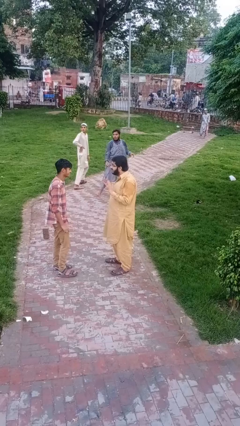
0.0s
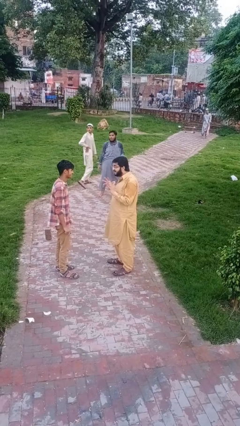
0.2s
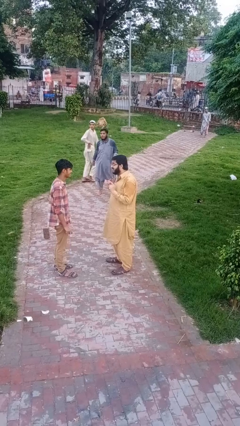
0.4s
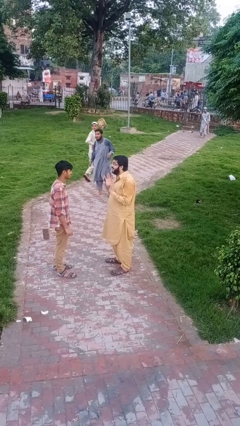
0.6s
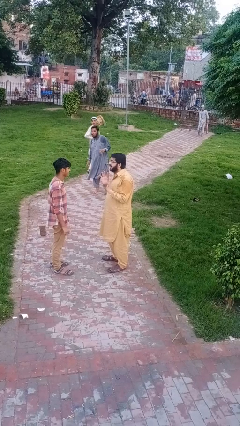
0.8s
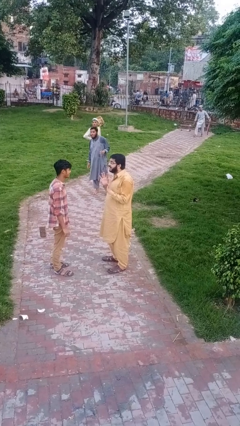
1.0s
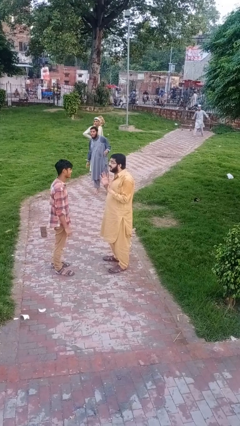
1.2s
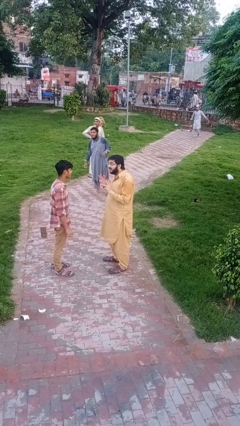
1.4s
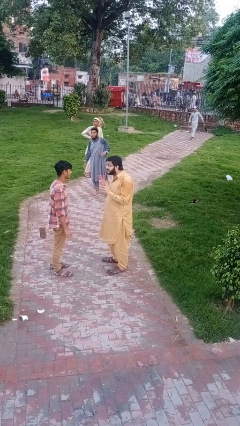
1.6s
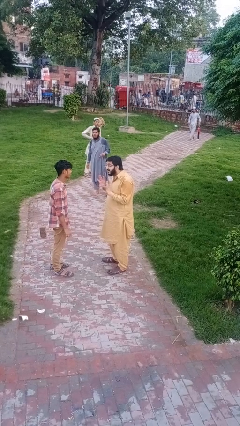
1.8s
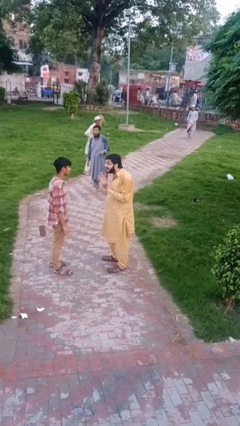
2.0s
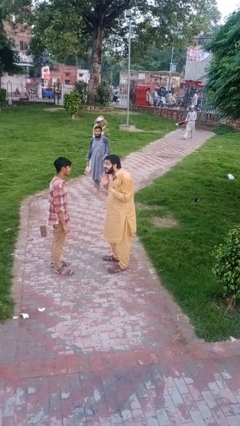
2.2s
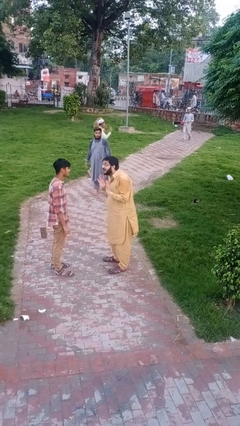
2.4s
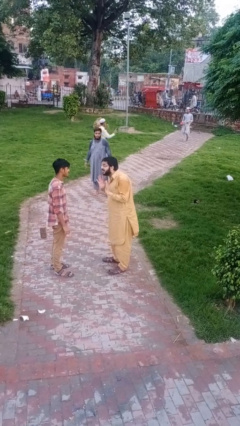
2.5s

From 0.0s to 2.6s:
person talks to person

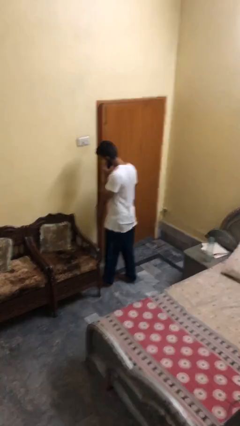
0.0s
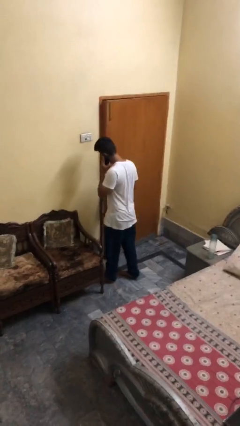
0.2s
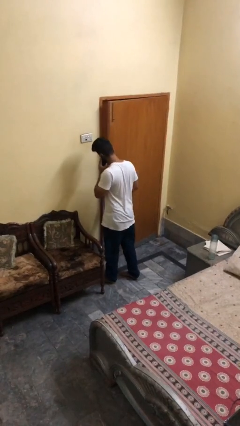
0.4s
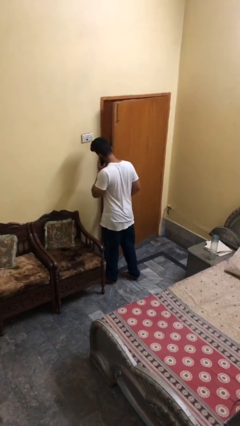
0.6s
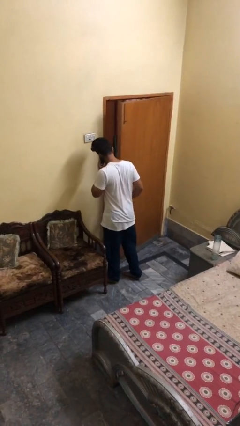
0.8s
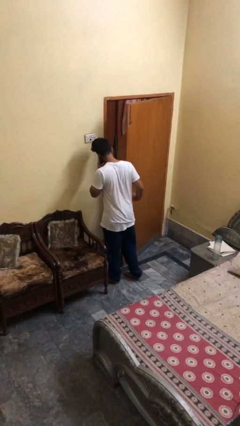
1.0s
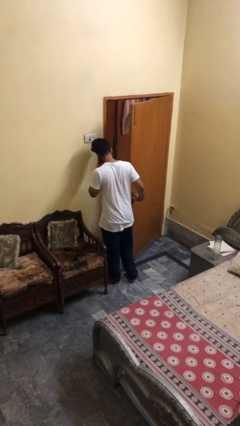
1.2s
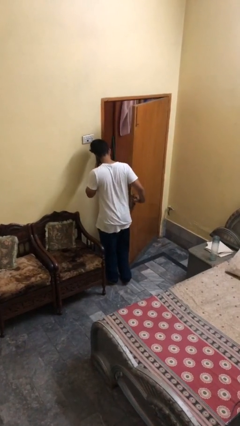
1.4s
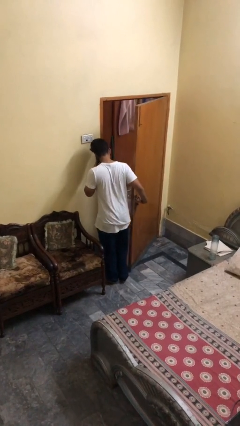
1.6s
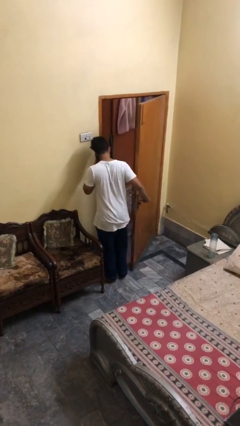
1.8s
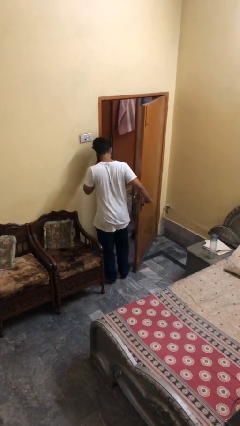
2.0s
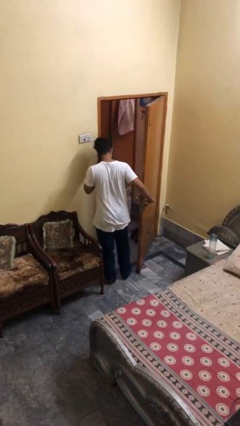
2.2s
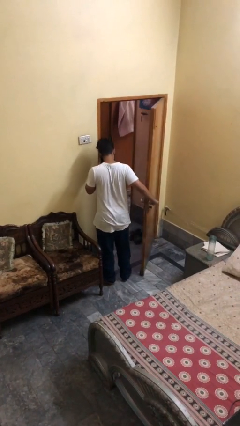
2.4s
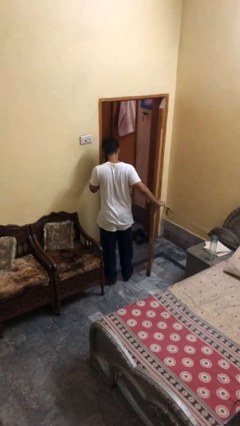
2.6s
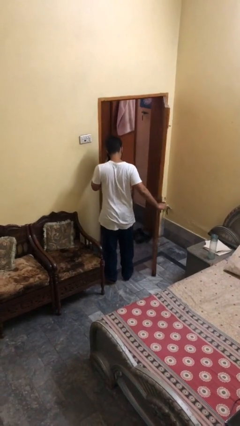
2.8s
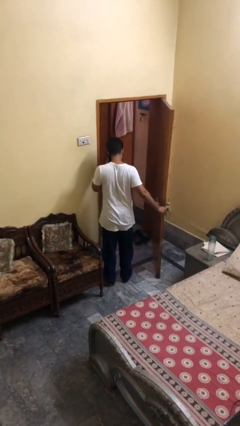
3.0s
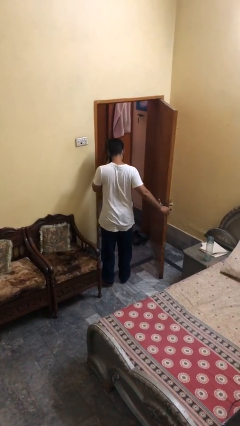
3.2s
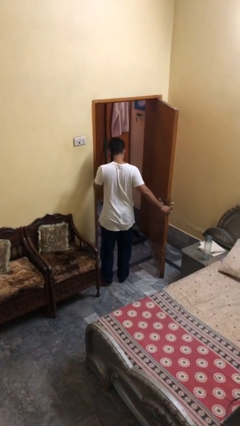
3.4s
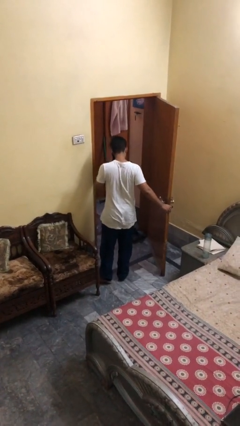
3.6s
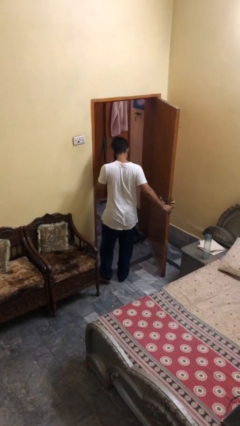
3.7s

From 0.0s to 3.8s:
person opens facility door

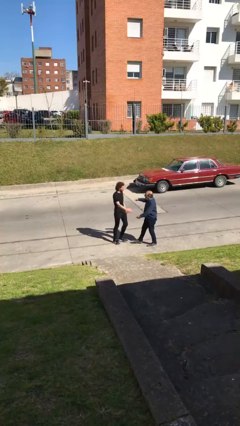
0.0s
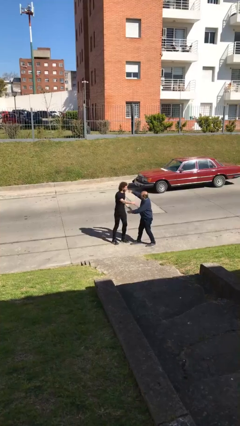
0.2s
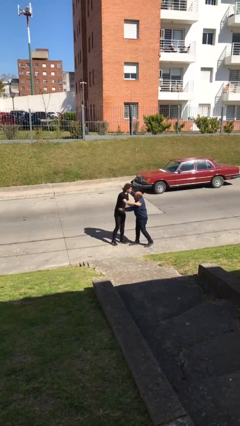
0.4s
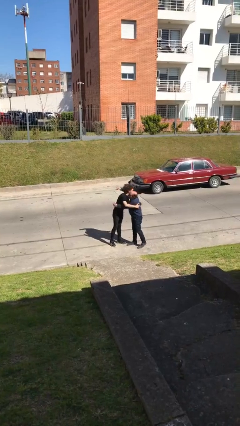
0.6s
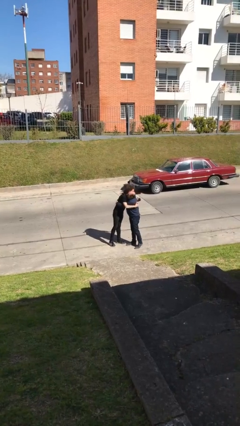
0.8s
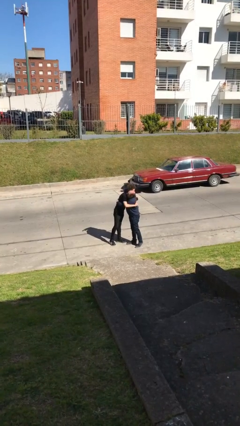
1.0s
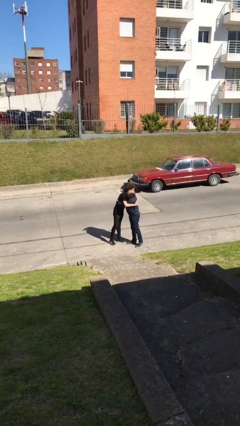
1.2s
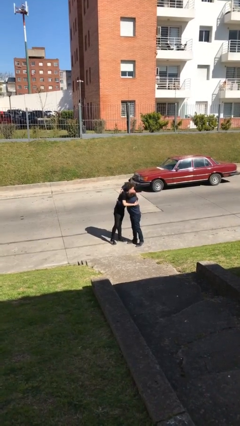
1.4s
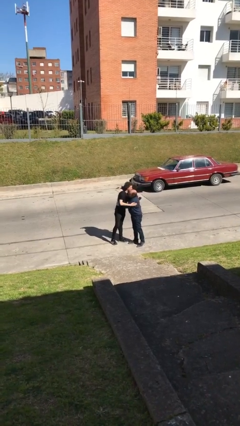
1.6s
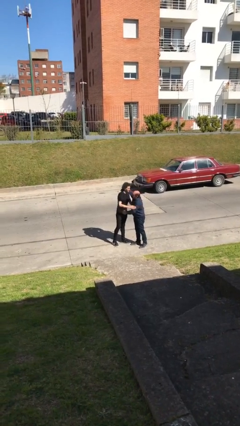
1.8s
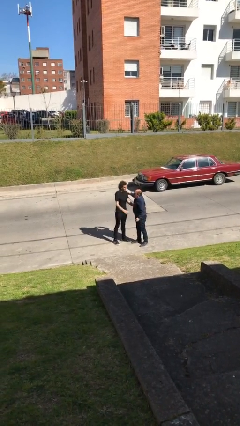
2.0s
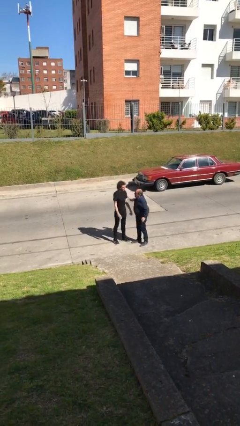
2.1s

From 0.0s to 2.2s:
person embraces person

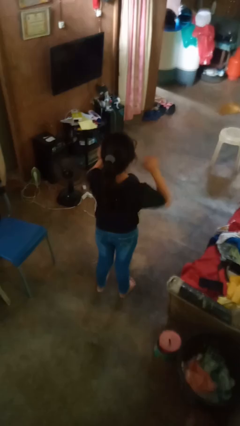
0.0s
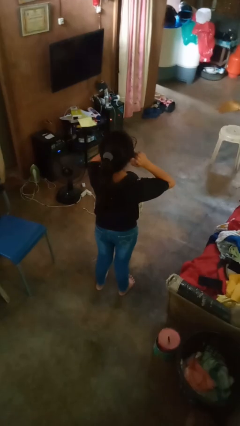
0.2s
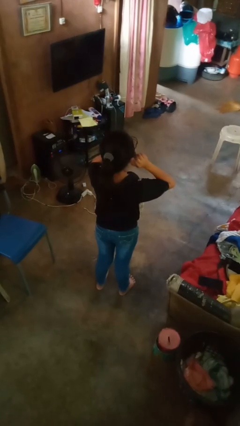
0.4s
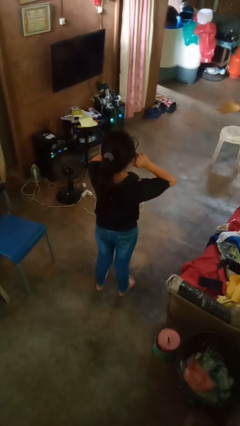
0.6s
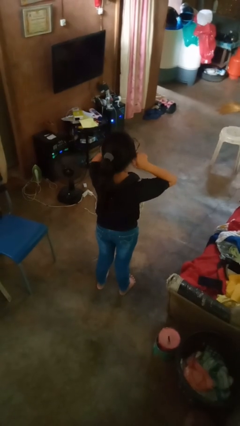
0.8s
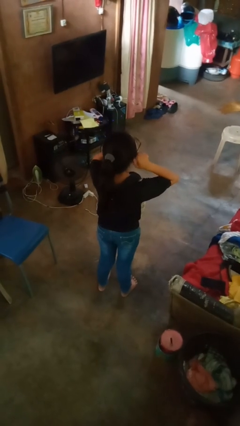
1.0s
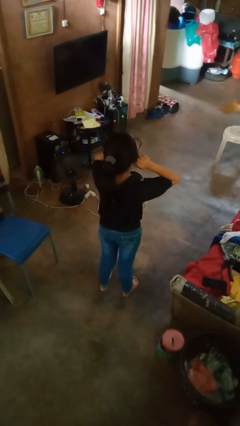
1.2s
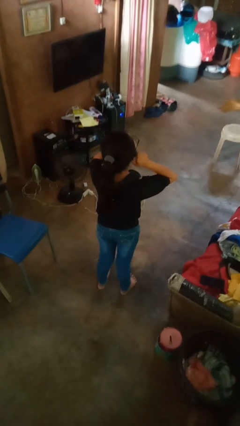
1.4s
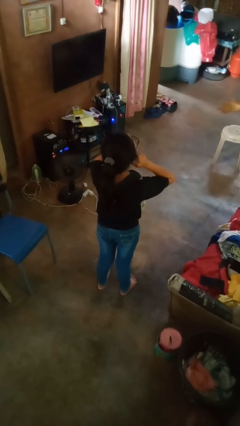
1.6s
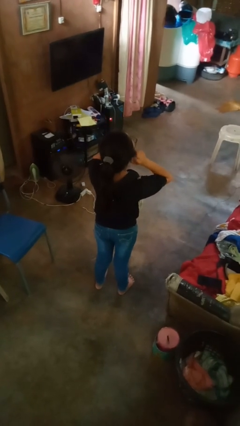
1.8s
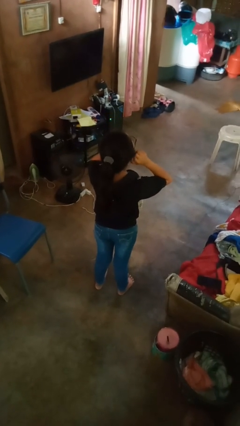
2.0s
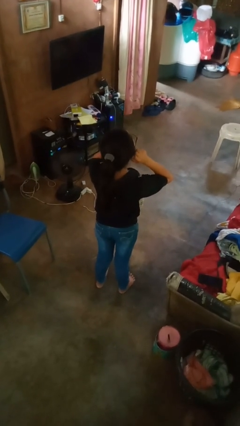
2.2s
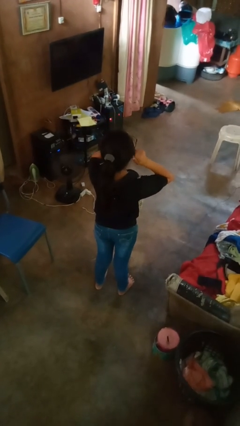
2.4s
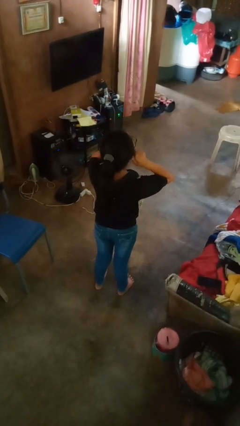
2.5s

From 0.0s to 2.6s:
person touches earlobe

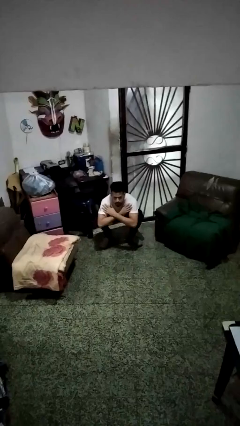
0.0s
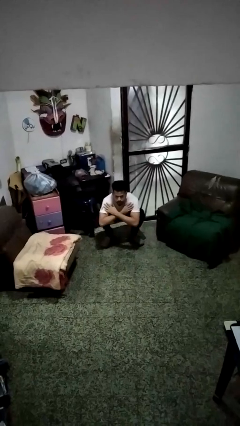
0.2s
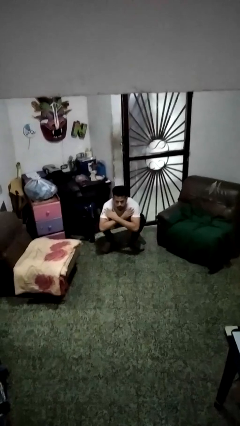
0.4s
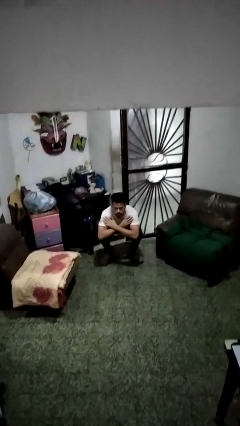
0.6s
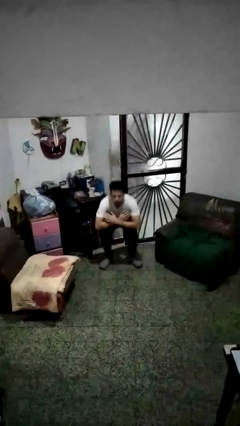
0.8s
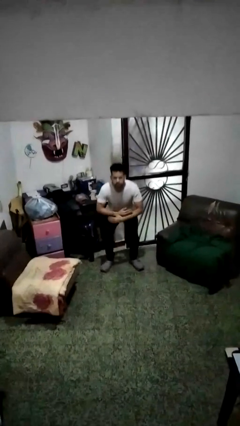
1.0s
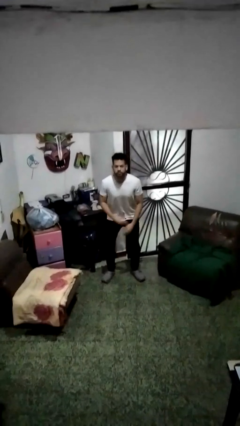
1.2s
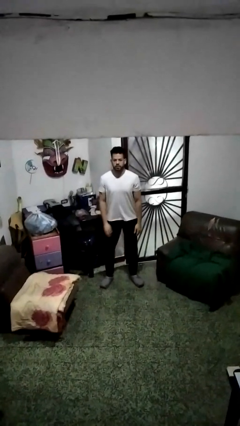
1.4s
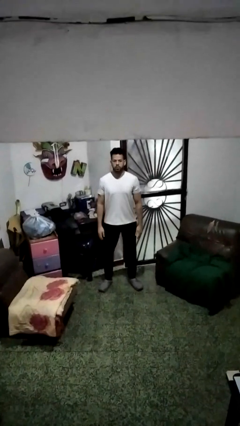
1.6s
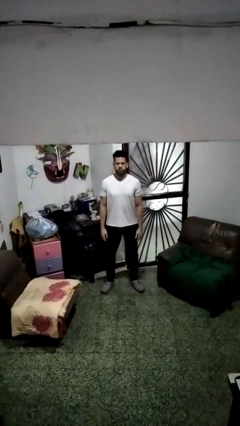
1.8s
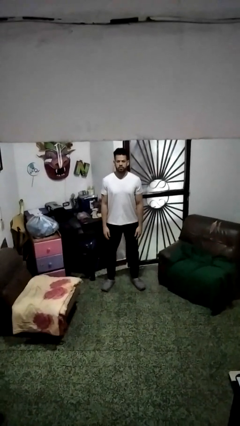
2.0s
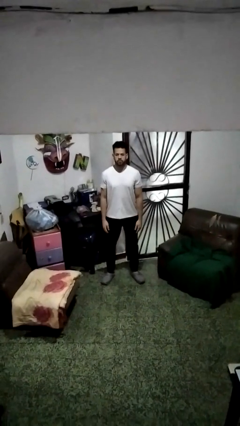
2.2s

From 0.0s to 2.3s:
person stands up

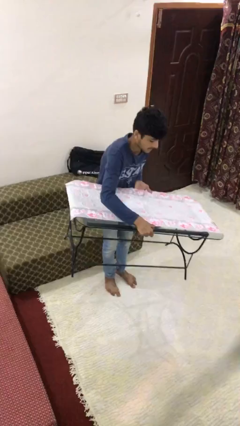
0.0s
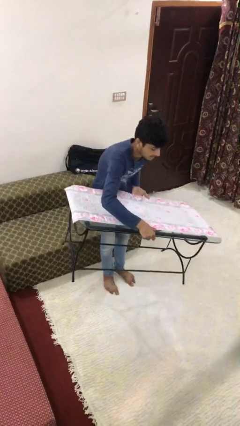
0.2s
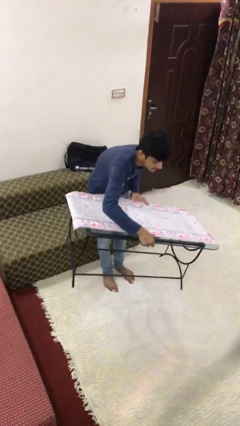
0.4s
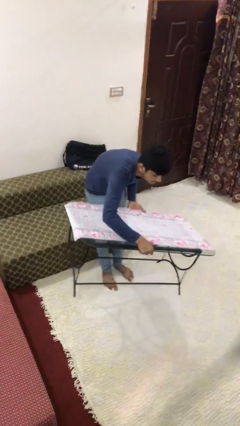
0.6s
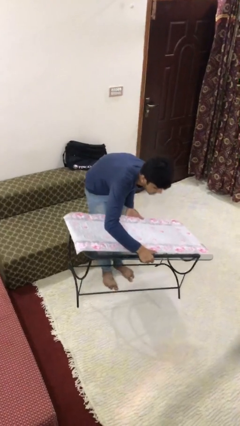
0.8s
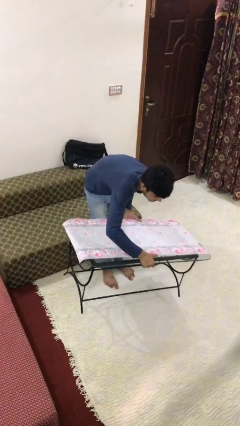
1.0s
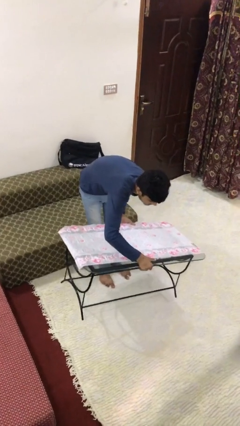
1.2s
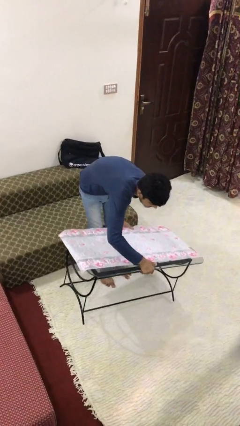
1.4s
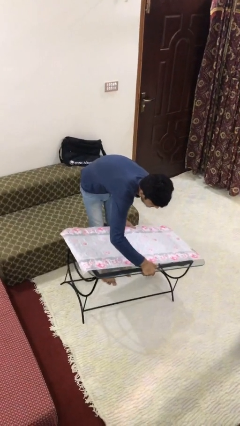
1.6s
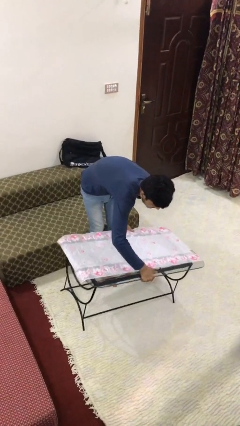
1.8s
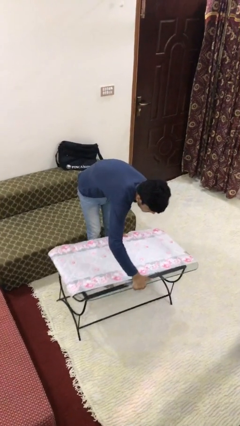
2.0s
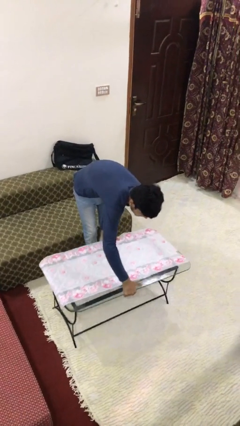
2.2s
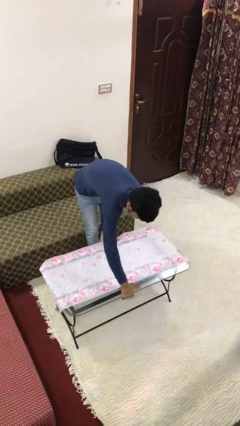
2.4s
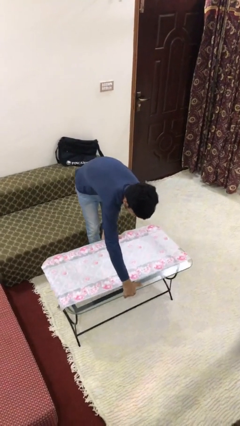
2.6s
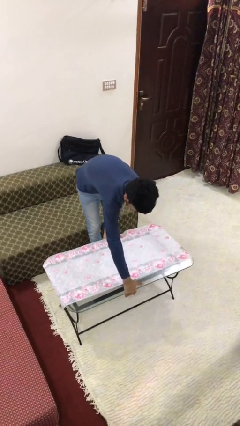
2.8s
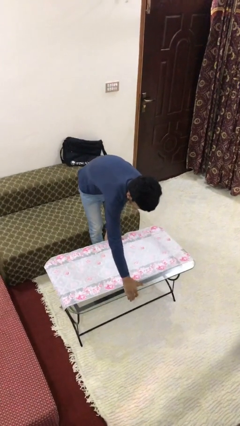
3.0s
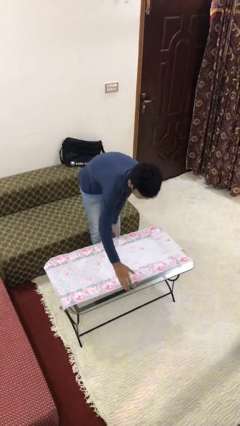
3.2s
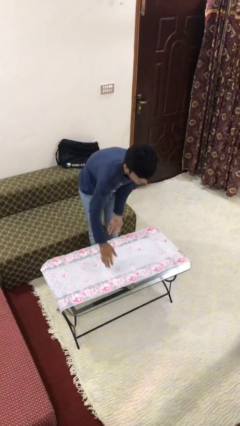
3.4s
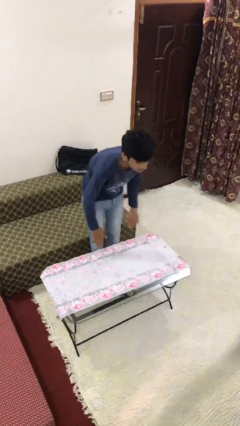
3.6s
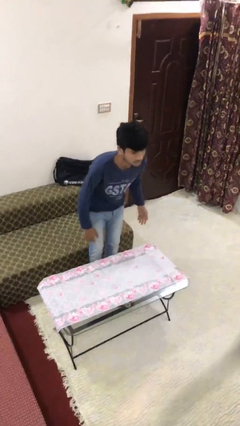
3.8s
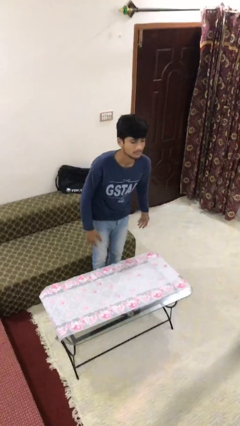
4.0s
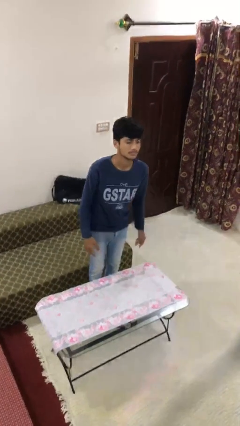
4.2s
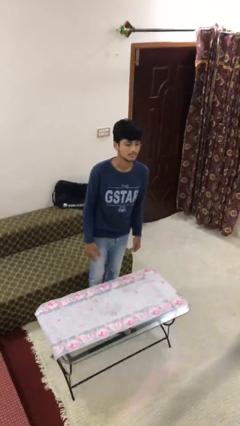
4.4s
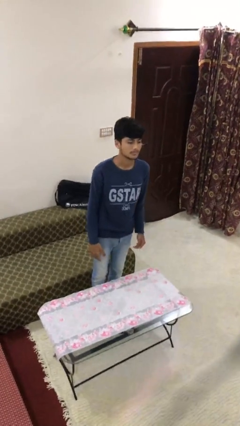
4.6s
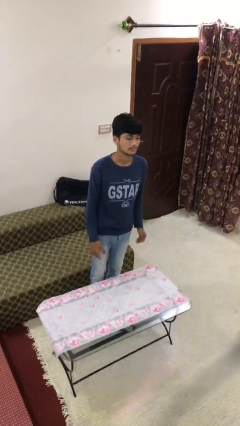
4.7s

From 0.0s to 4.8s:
person puts down object on floor
